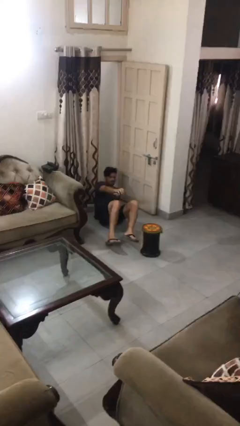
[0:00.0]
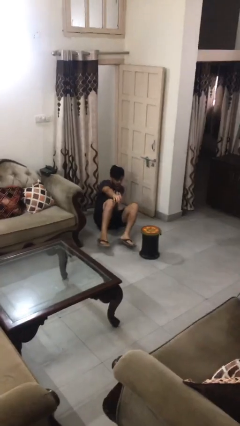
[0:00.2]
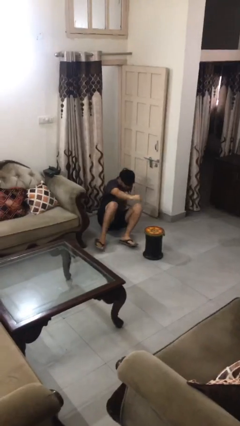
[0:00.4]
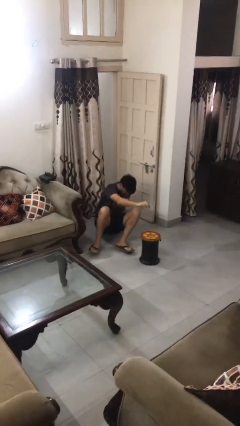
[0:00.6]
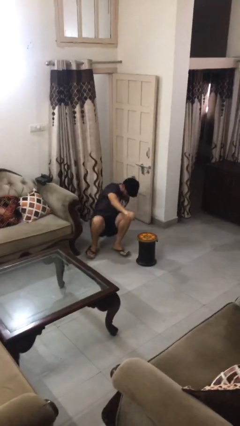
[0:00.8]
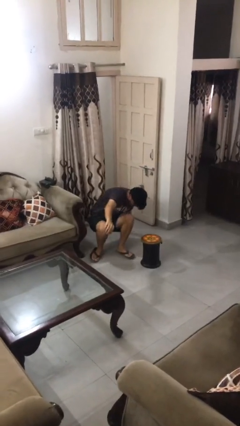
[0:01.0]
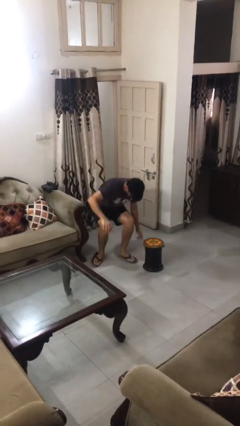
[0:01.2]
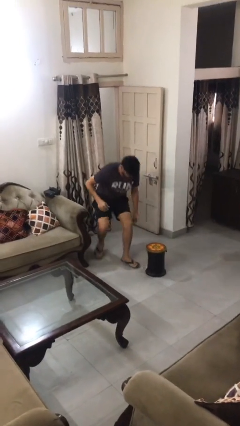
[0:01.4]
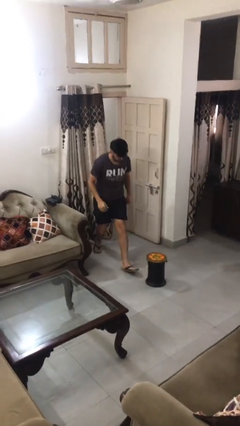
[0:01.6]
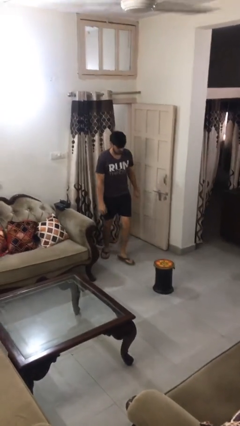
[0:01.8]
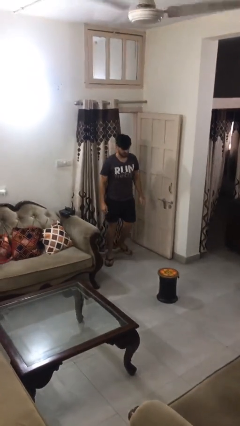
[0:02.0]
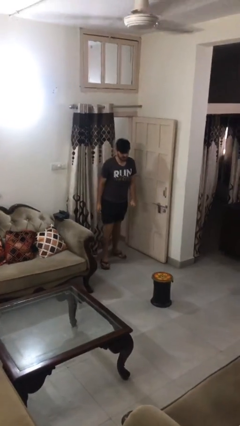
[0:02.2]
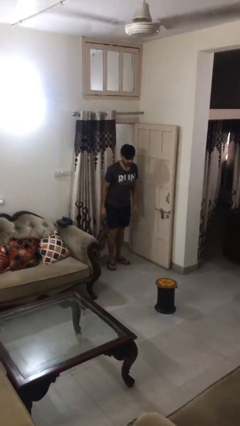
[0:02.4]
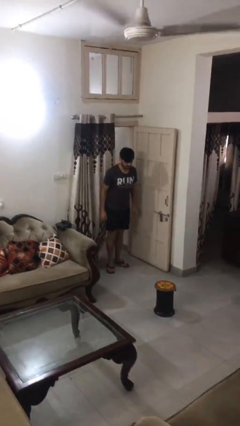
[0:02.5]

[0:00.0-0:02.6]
person stands up from floor

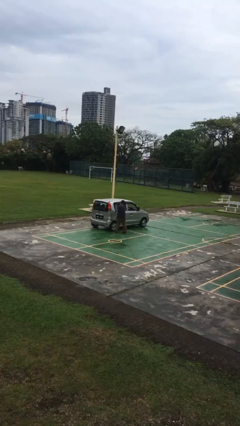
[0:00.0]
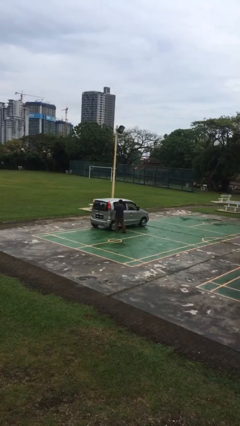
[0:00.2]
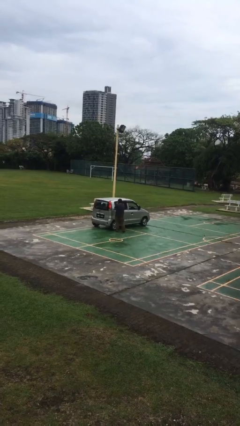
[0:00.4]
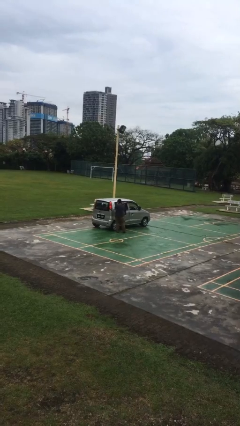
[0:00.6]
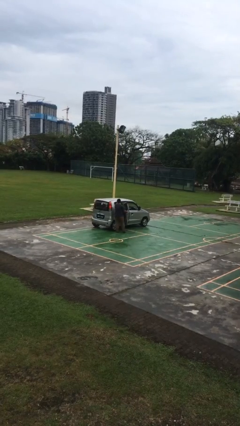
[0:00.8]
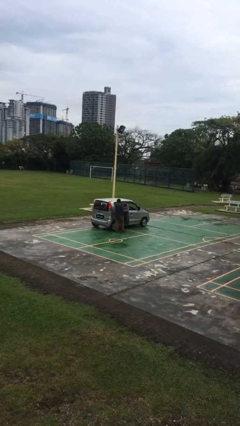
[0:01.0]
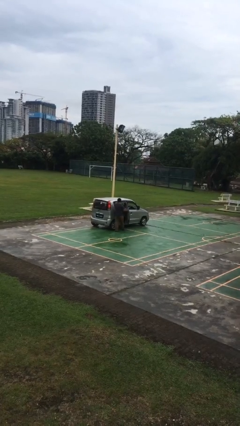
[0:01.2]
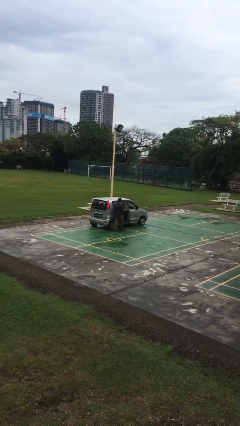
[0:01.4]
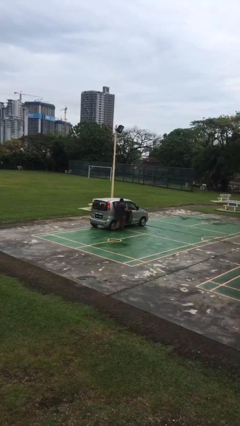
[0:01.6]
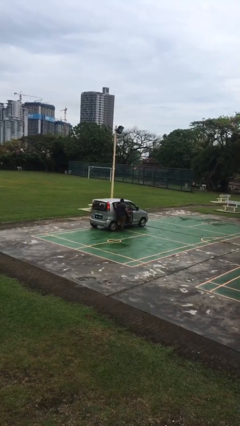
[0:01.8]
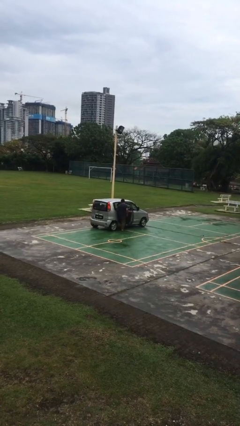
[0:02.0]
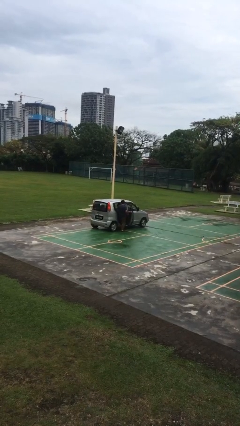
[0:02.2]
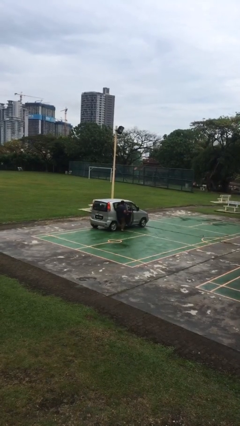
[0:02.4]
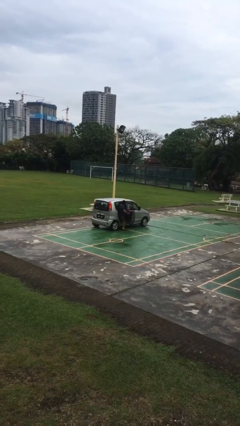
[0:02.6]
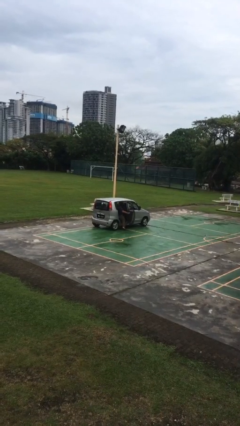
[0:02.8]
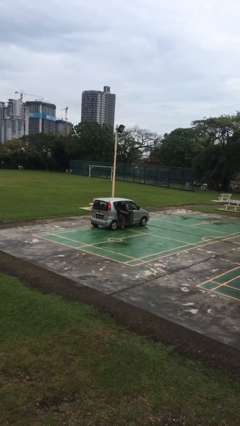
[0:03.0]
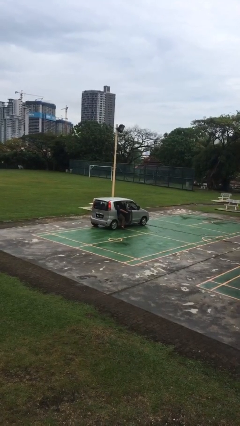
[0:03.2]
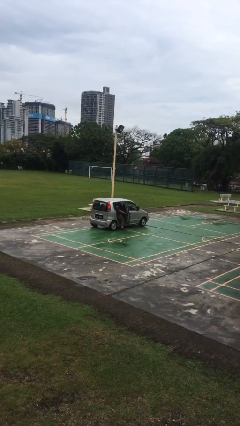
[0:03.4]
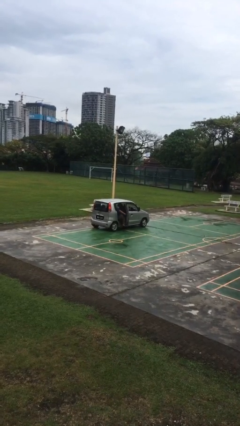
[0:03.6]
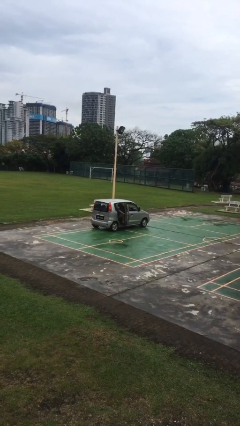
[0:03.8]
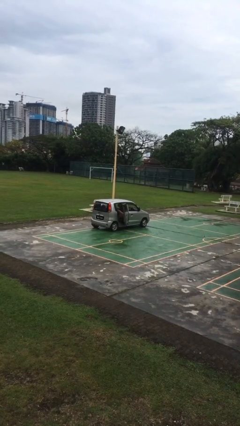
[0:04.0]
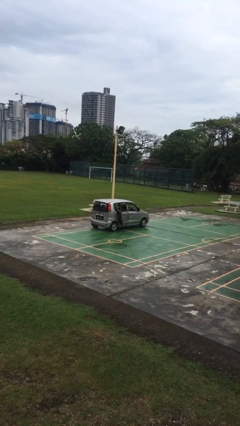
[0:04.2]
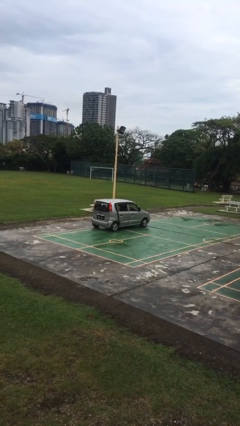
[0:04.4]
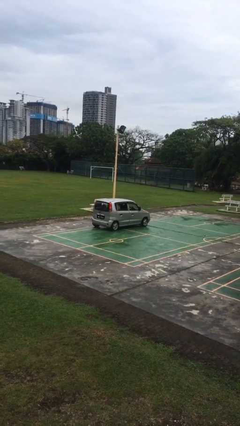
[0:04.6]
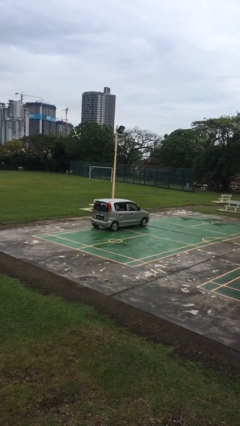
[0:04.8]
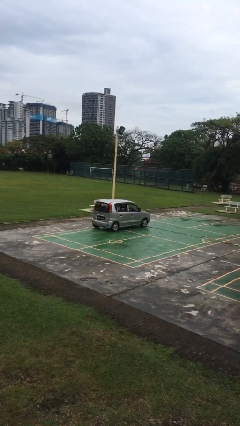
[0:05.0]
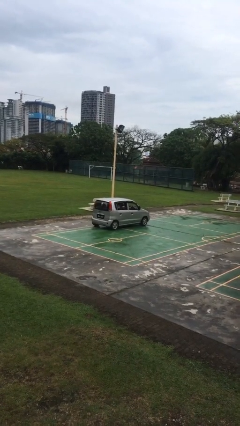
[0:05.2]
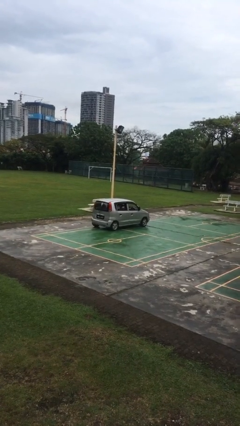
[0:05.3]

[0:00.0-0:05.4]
car picks up person

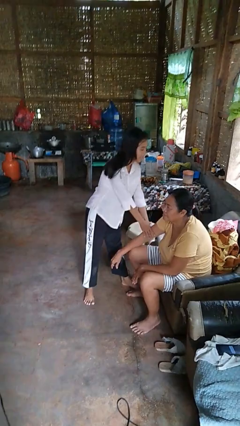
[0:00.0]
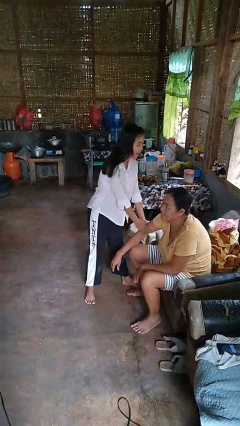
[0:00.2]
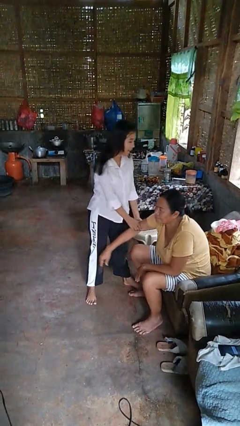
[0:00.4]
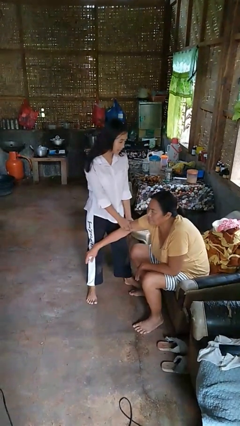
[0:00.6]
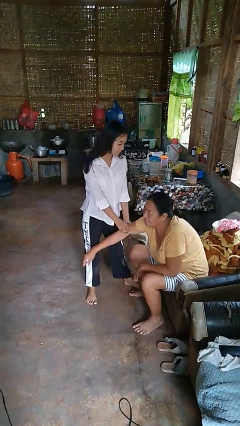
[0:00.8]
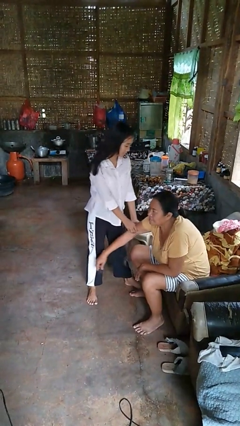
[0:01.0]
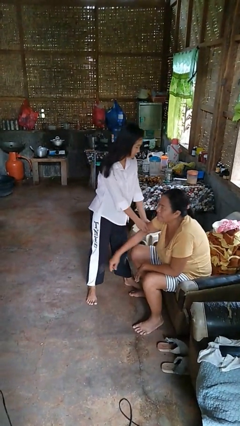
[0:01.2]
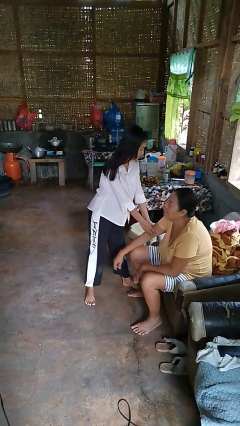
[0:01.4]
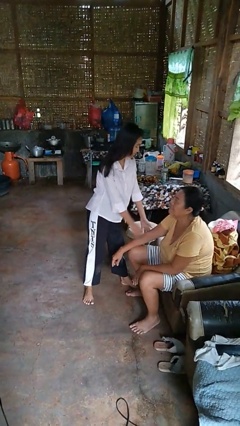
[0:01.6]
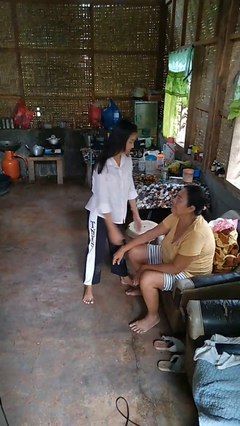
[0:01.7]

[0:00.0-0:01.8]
person grabs person by bicep

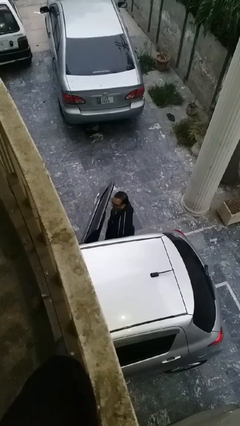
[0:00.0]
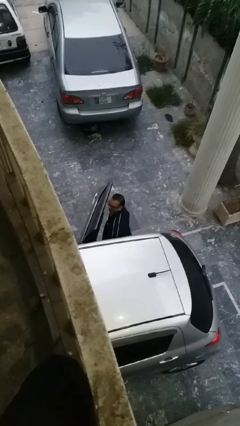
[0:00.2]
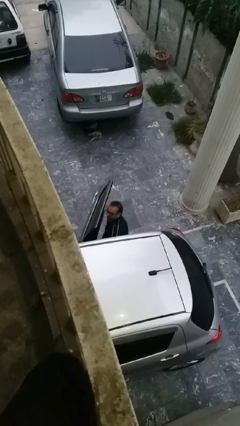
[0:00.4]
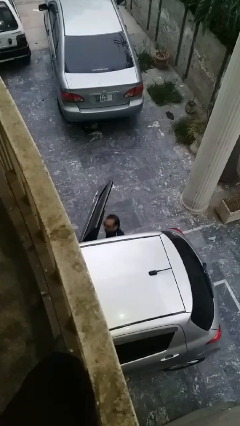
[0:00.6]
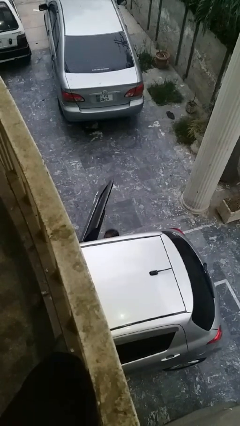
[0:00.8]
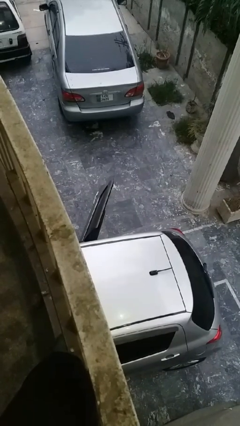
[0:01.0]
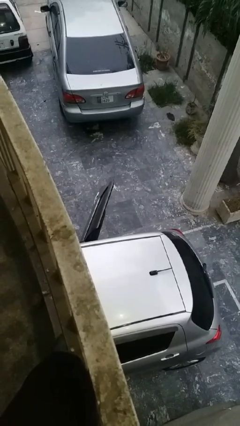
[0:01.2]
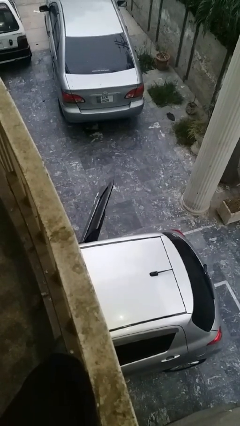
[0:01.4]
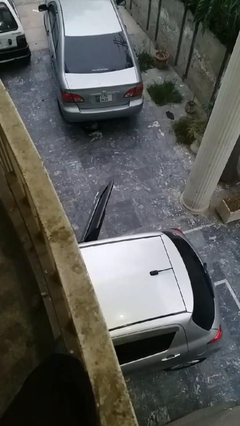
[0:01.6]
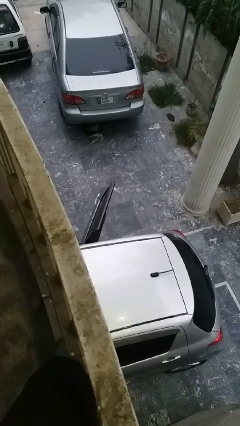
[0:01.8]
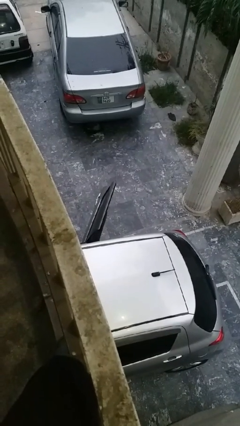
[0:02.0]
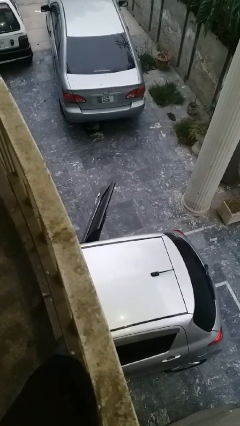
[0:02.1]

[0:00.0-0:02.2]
person enters car

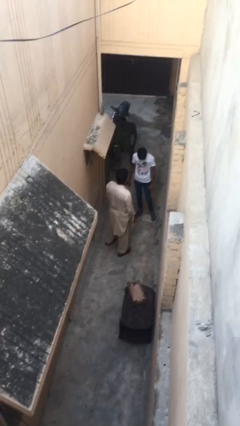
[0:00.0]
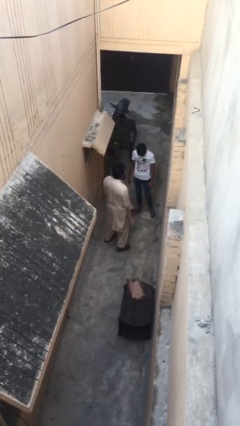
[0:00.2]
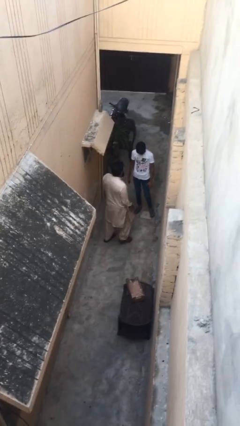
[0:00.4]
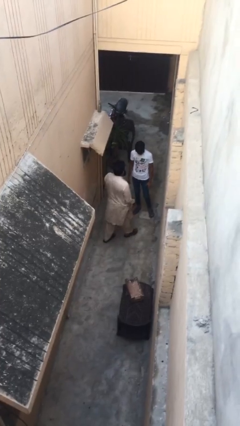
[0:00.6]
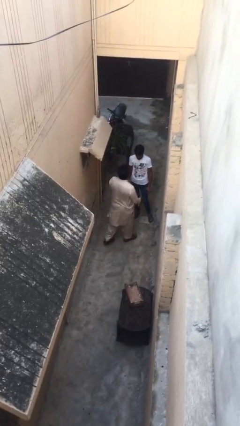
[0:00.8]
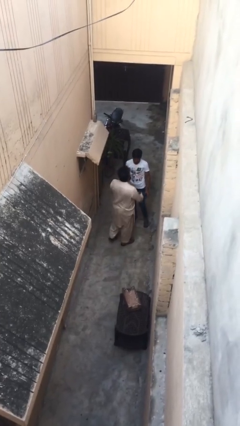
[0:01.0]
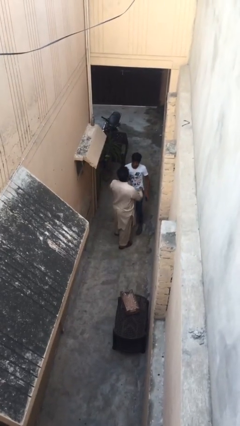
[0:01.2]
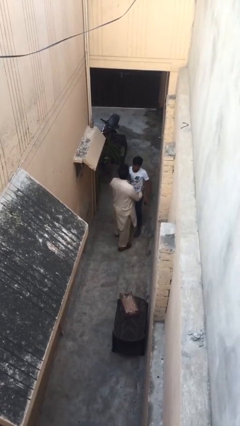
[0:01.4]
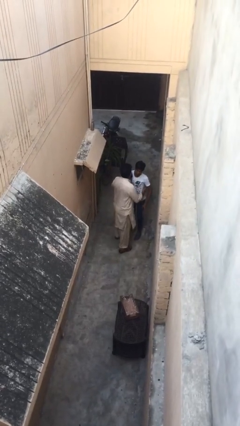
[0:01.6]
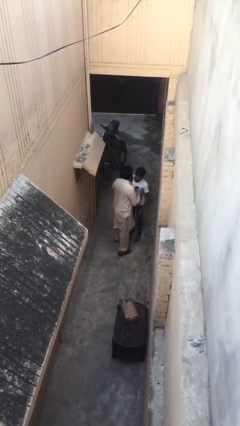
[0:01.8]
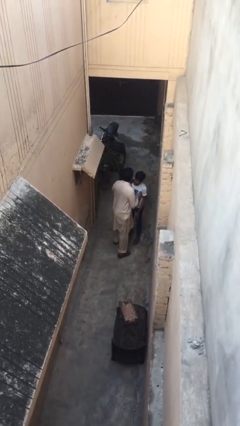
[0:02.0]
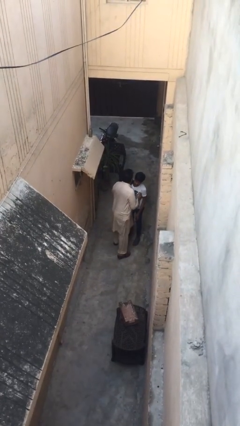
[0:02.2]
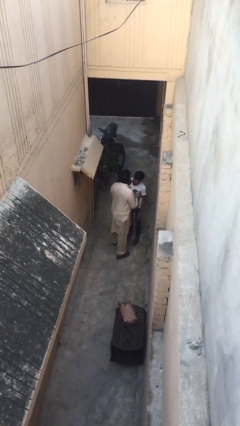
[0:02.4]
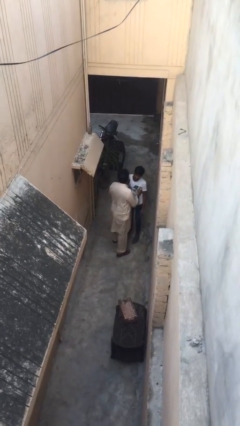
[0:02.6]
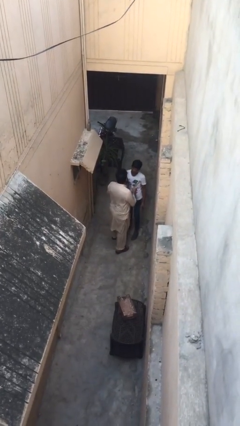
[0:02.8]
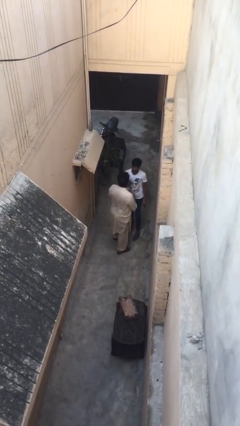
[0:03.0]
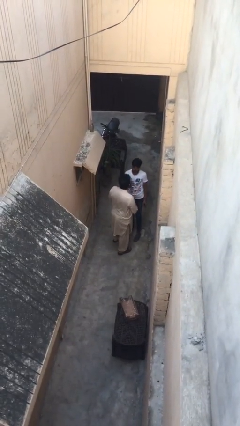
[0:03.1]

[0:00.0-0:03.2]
person embraces person

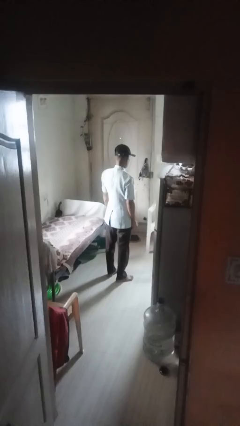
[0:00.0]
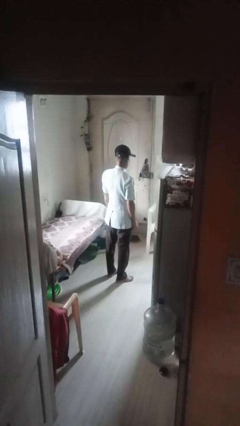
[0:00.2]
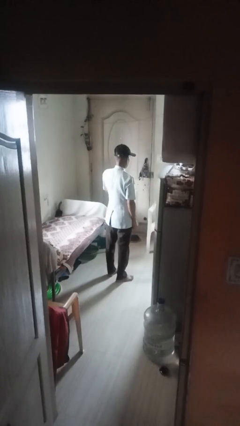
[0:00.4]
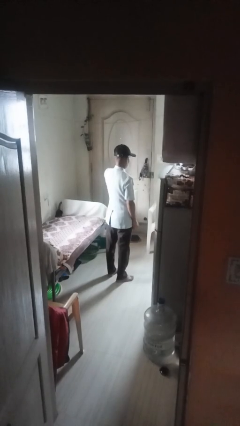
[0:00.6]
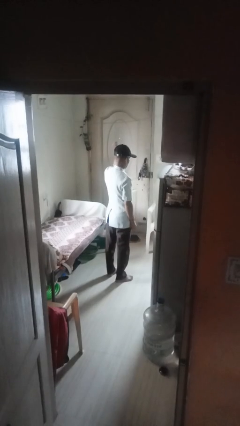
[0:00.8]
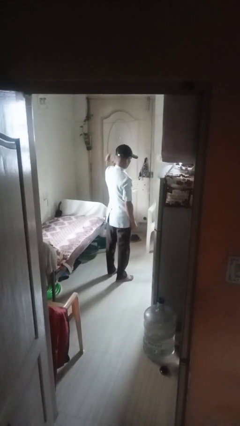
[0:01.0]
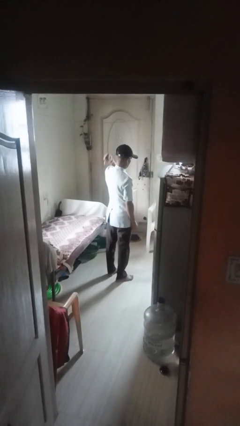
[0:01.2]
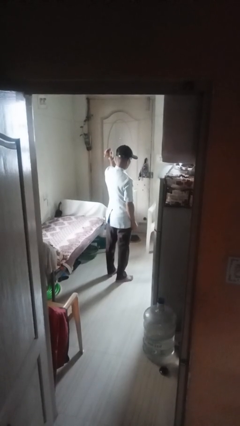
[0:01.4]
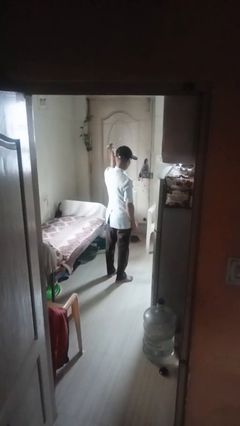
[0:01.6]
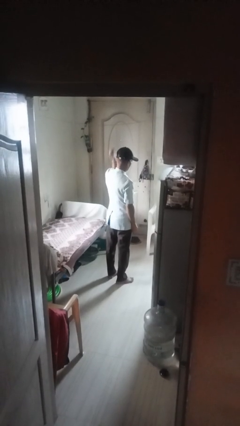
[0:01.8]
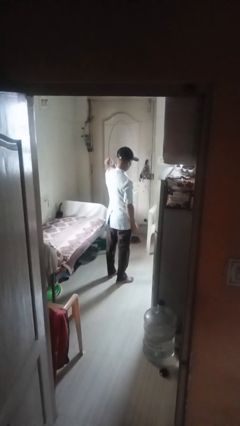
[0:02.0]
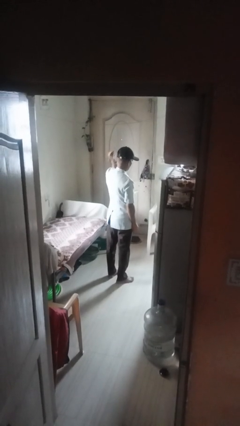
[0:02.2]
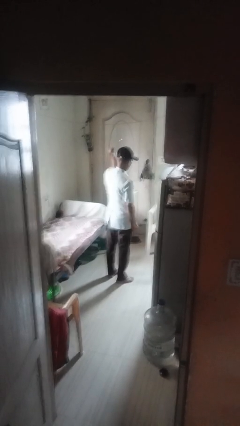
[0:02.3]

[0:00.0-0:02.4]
person gestures behind me
